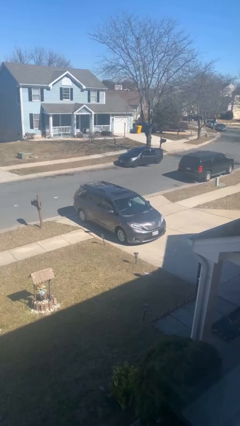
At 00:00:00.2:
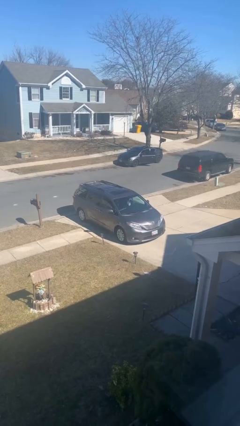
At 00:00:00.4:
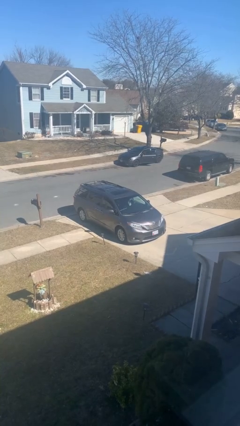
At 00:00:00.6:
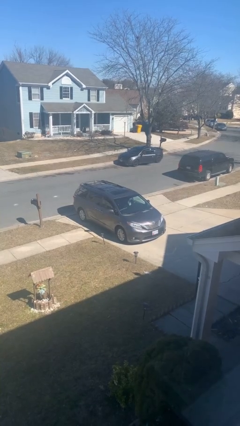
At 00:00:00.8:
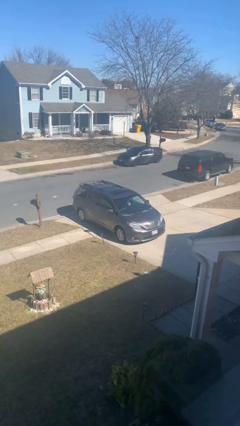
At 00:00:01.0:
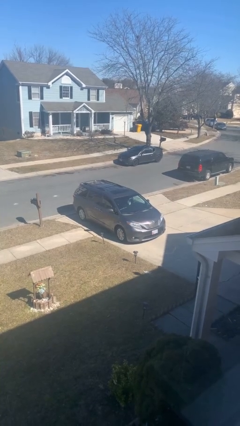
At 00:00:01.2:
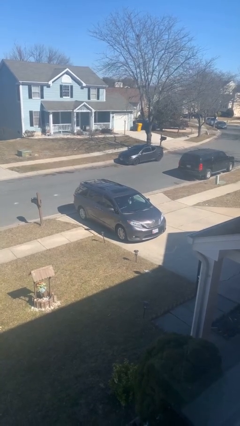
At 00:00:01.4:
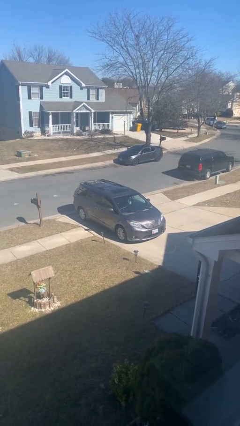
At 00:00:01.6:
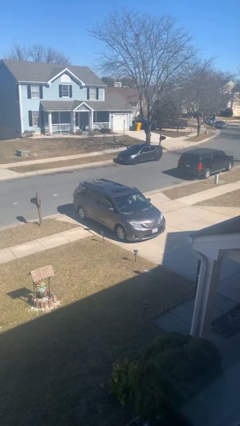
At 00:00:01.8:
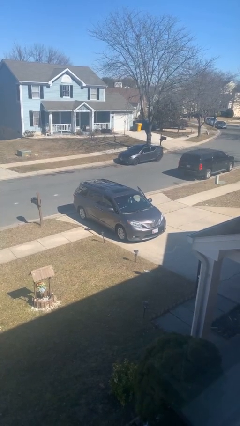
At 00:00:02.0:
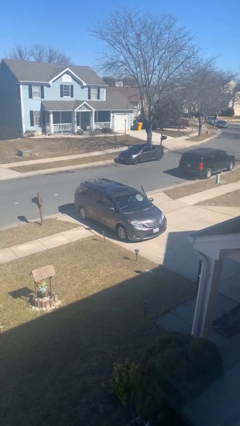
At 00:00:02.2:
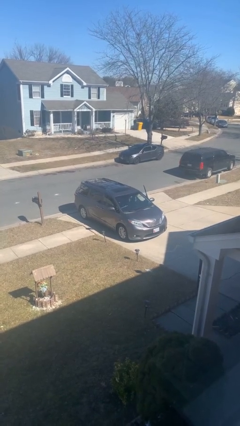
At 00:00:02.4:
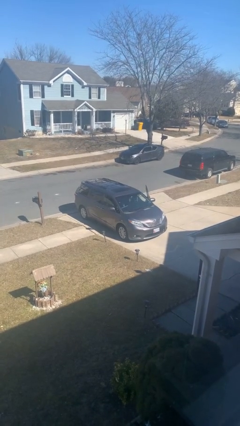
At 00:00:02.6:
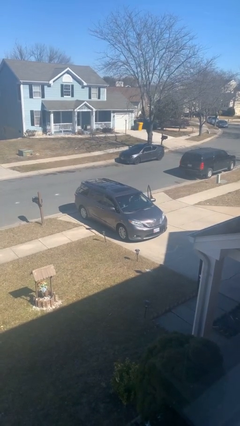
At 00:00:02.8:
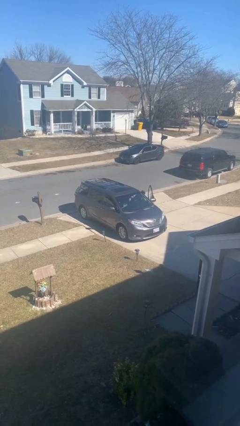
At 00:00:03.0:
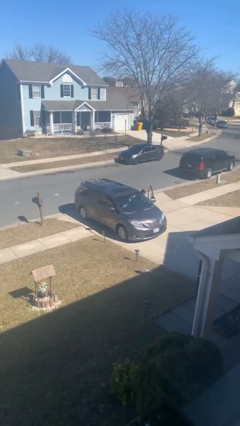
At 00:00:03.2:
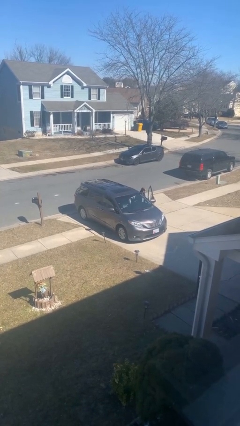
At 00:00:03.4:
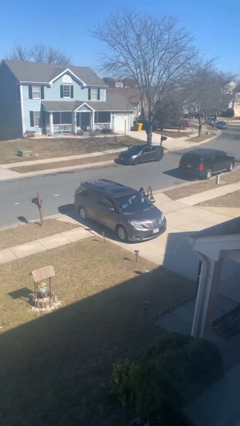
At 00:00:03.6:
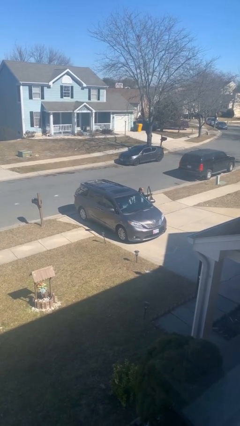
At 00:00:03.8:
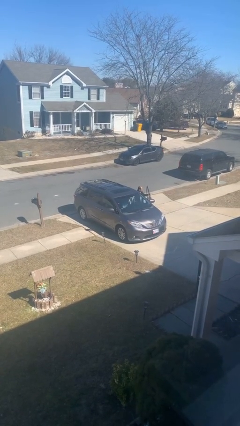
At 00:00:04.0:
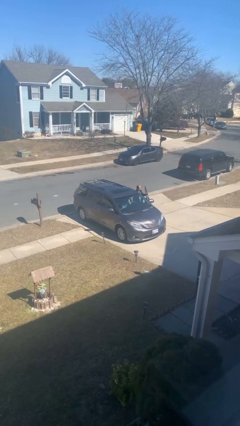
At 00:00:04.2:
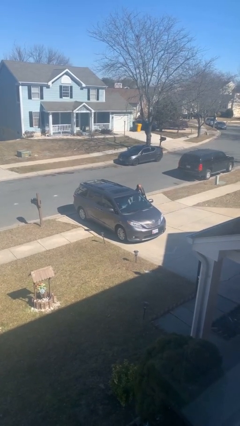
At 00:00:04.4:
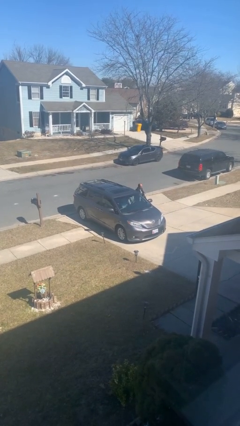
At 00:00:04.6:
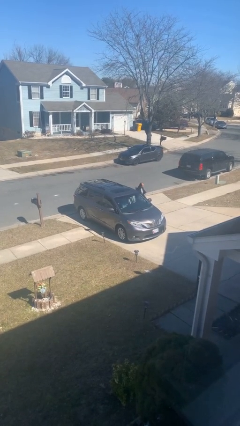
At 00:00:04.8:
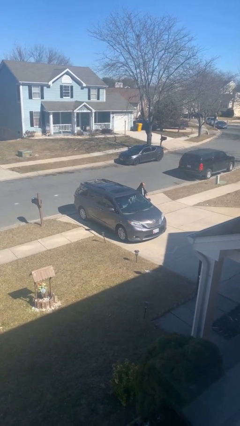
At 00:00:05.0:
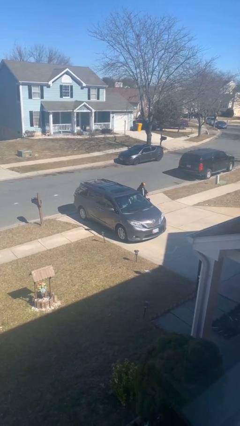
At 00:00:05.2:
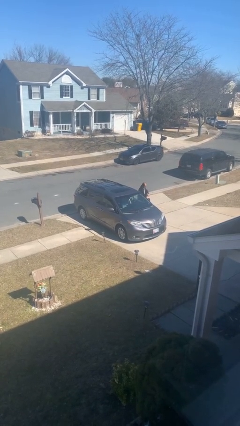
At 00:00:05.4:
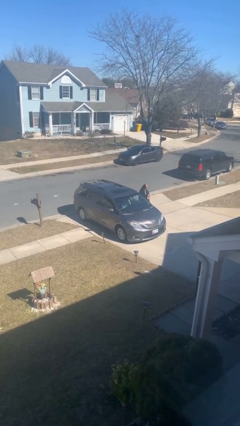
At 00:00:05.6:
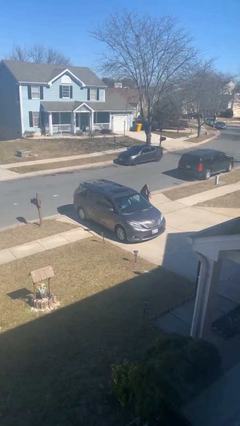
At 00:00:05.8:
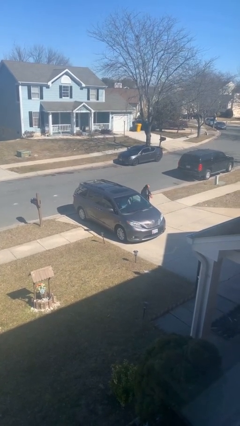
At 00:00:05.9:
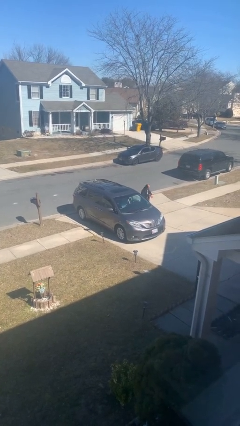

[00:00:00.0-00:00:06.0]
car drops off person

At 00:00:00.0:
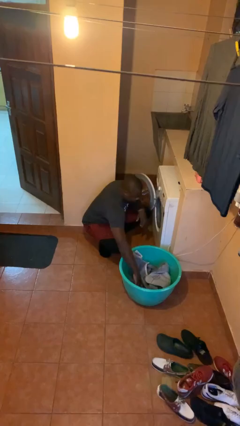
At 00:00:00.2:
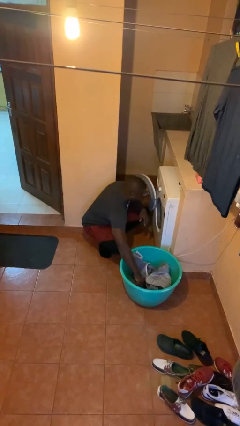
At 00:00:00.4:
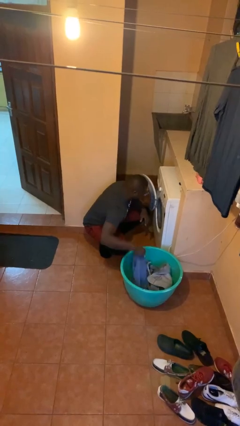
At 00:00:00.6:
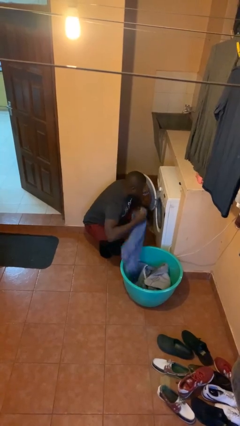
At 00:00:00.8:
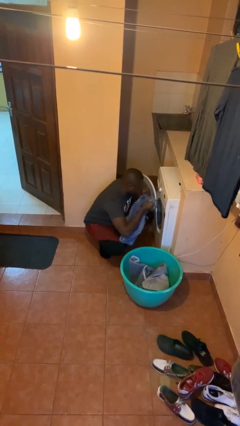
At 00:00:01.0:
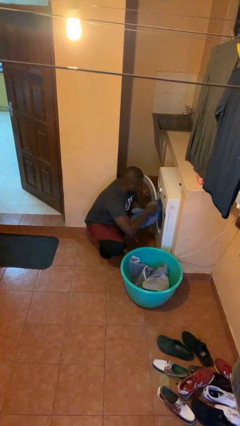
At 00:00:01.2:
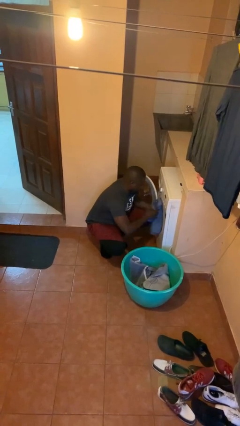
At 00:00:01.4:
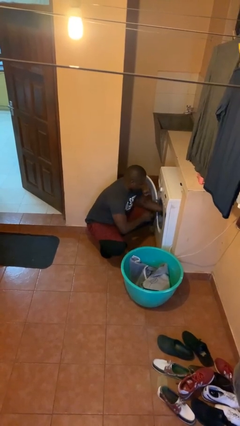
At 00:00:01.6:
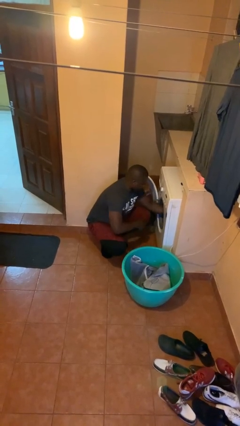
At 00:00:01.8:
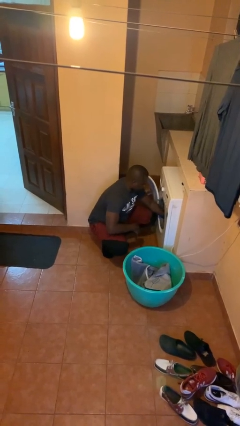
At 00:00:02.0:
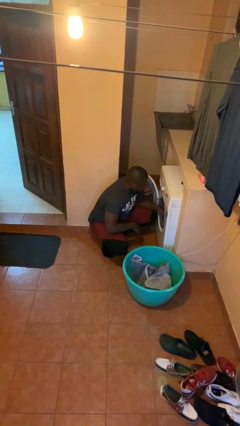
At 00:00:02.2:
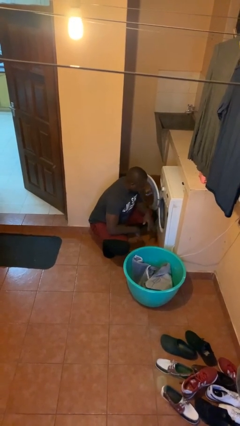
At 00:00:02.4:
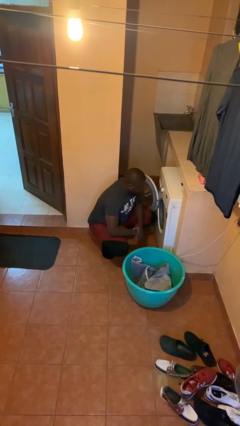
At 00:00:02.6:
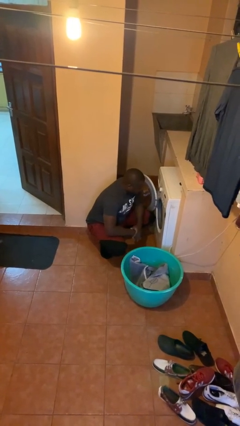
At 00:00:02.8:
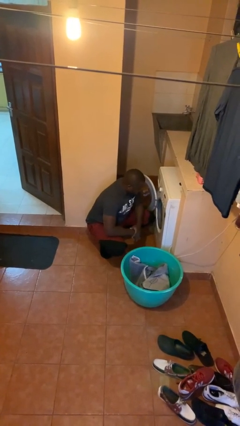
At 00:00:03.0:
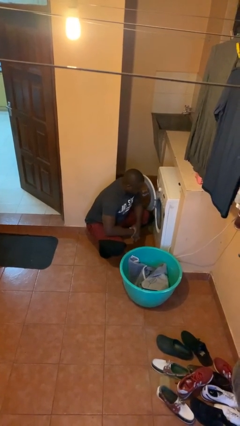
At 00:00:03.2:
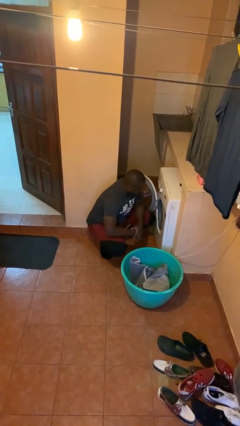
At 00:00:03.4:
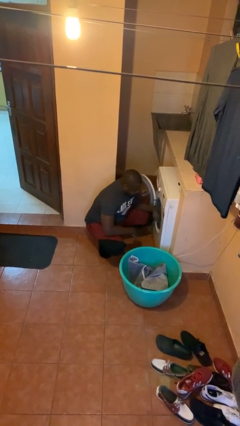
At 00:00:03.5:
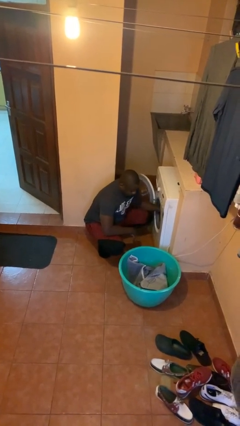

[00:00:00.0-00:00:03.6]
person loads dryer

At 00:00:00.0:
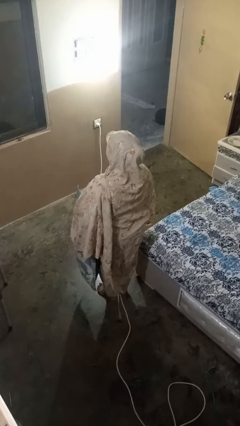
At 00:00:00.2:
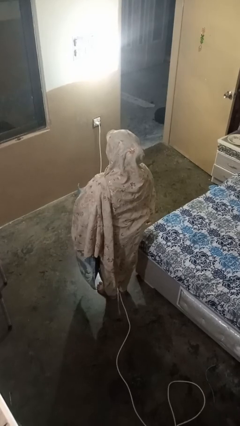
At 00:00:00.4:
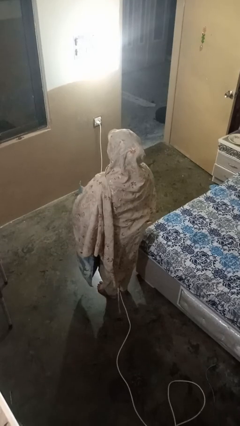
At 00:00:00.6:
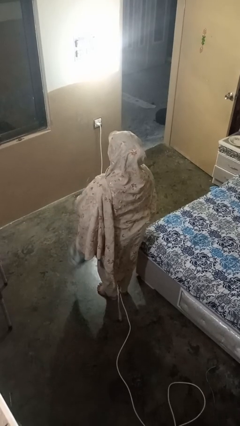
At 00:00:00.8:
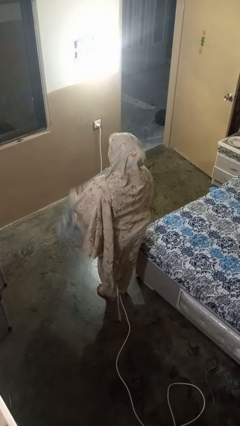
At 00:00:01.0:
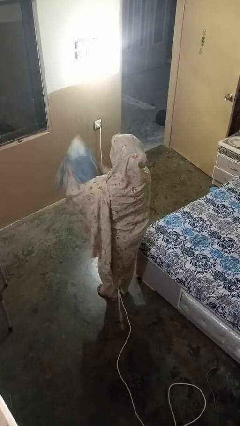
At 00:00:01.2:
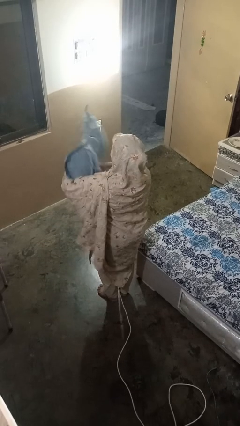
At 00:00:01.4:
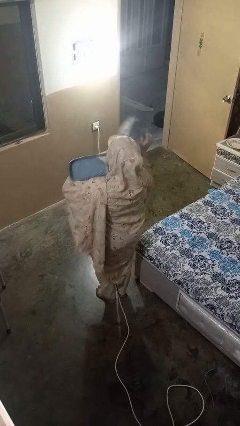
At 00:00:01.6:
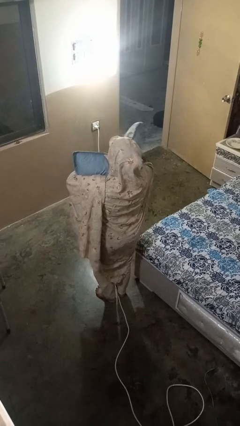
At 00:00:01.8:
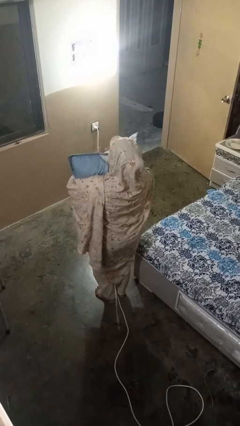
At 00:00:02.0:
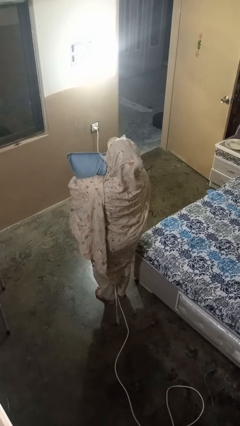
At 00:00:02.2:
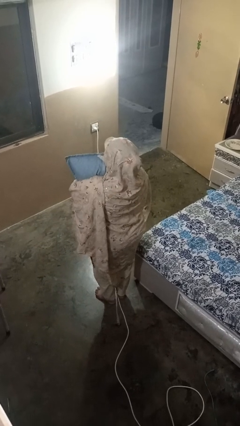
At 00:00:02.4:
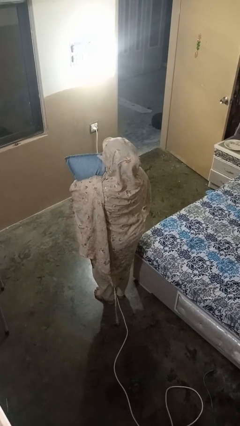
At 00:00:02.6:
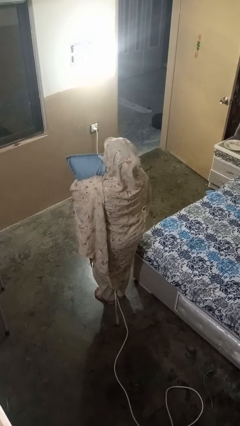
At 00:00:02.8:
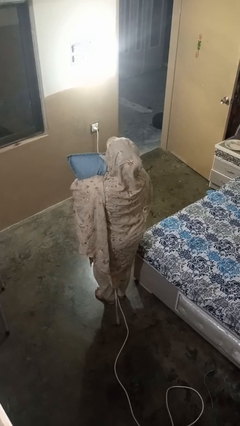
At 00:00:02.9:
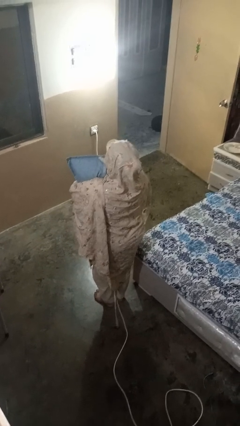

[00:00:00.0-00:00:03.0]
person squeezes object

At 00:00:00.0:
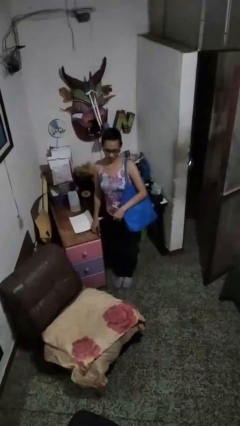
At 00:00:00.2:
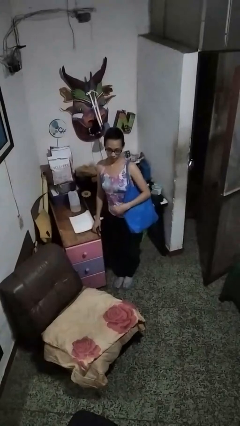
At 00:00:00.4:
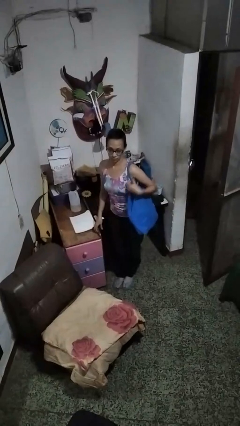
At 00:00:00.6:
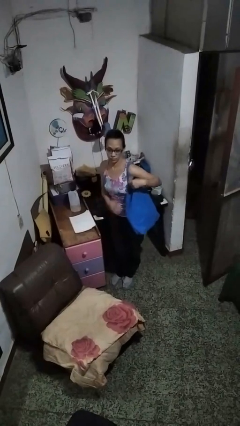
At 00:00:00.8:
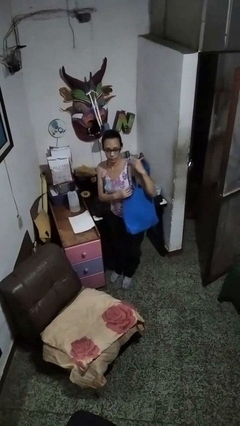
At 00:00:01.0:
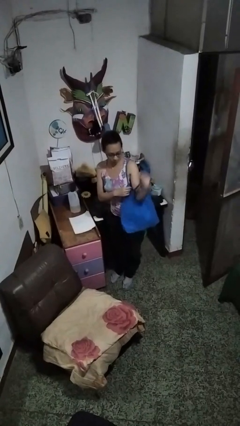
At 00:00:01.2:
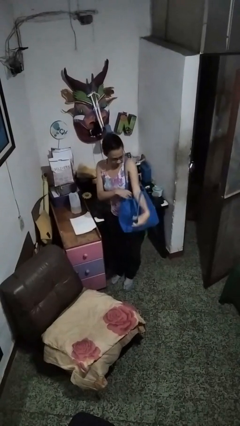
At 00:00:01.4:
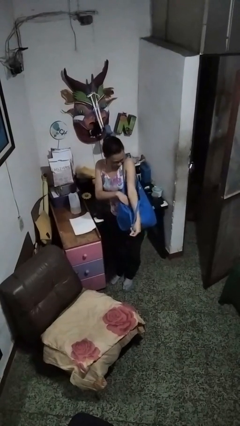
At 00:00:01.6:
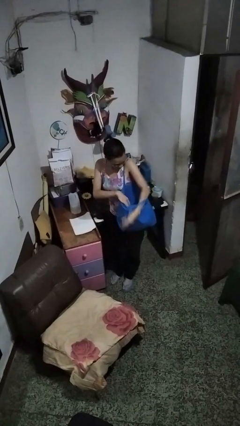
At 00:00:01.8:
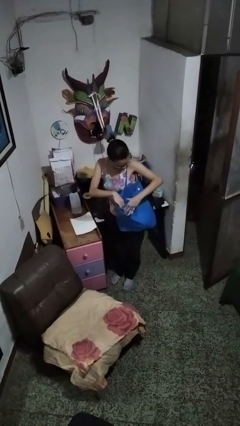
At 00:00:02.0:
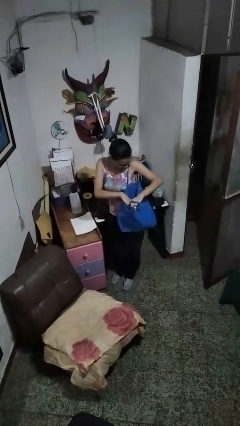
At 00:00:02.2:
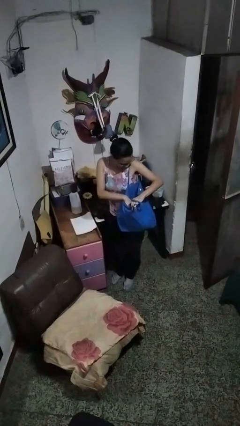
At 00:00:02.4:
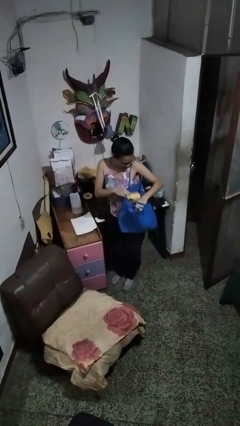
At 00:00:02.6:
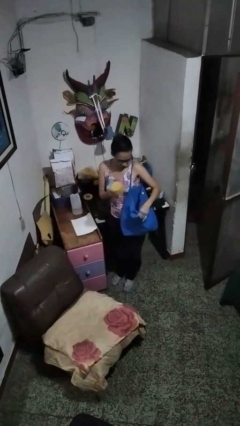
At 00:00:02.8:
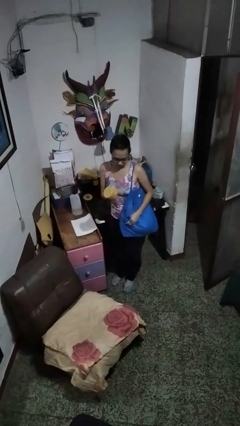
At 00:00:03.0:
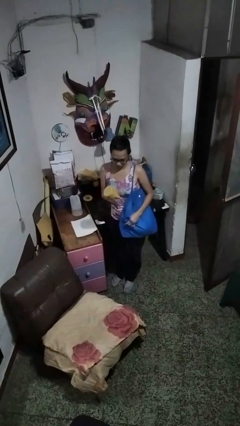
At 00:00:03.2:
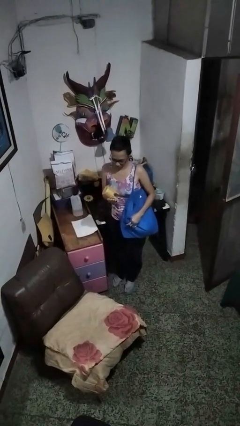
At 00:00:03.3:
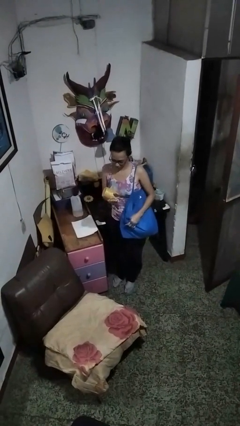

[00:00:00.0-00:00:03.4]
person takes object from bag

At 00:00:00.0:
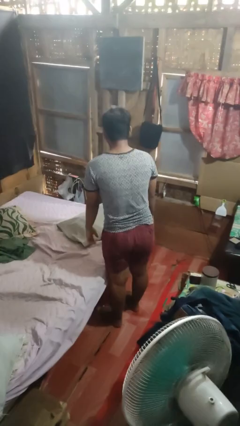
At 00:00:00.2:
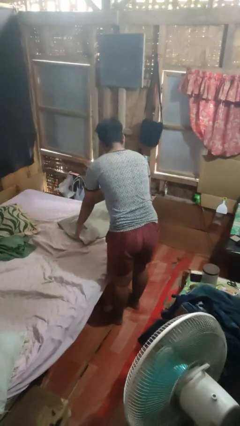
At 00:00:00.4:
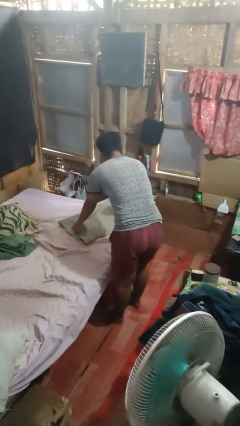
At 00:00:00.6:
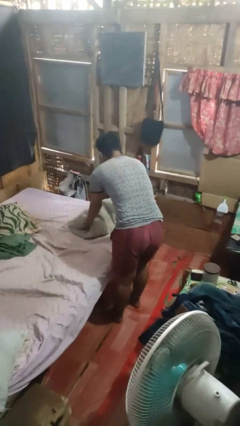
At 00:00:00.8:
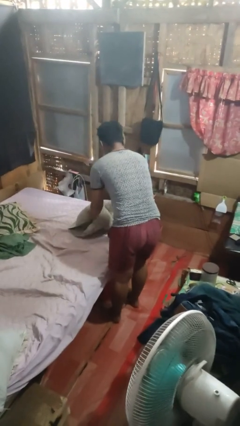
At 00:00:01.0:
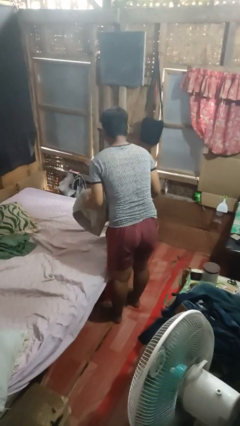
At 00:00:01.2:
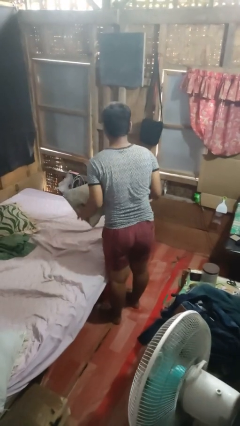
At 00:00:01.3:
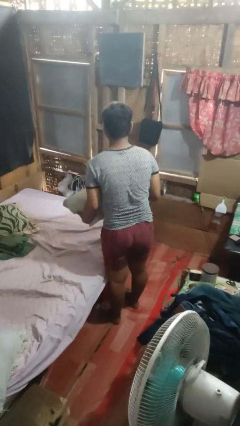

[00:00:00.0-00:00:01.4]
person picks up object from bed

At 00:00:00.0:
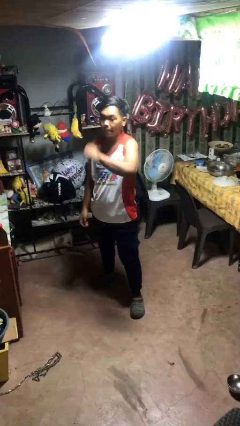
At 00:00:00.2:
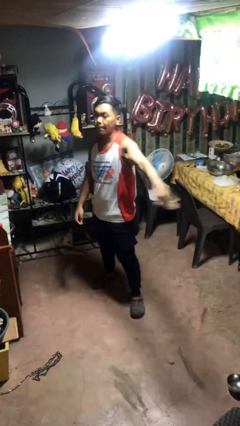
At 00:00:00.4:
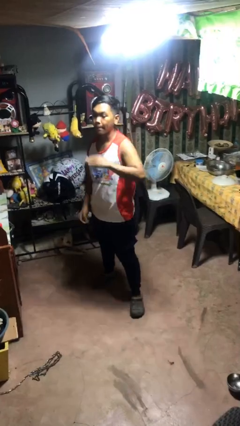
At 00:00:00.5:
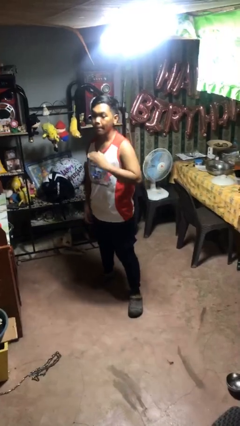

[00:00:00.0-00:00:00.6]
person karate chop
